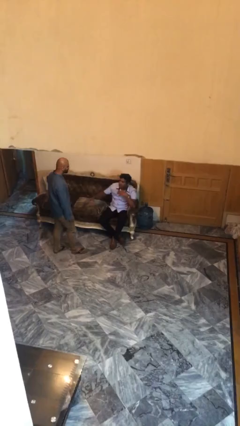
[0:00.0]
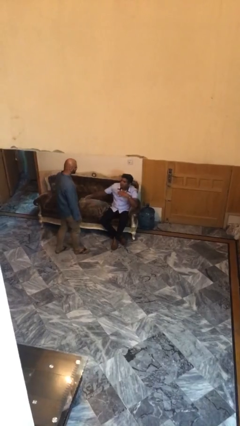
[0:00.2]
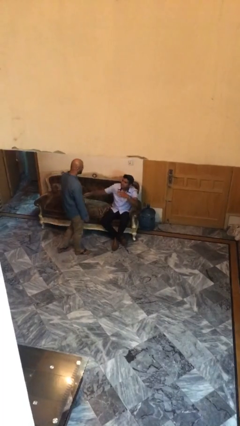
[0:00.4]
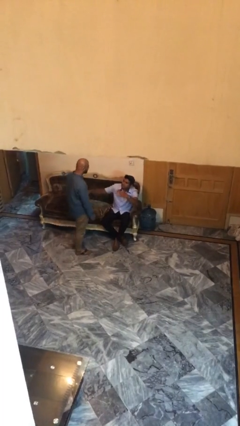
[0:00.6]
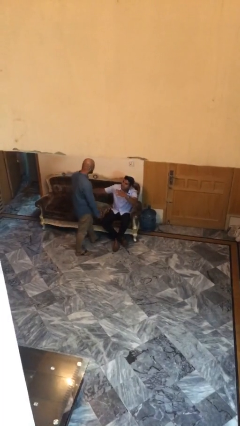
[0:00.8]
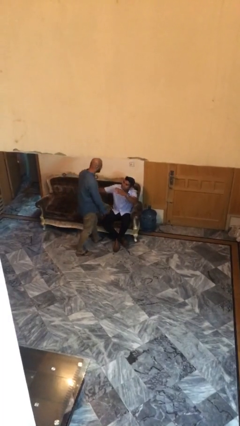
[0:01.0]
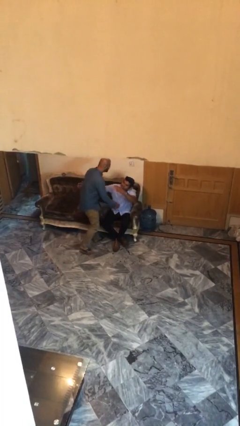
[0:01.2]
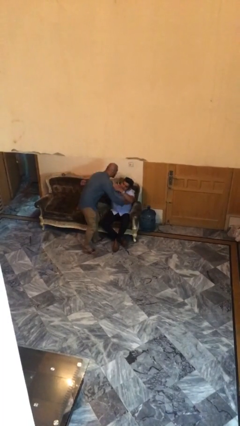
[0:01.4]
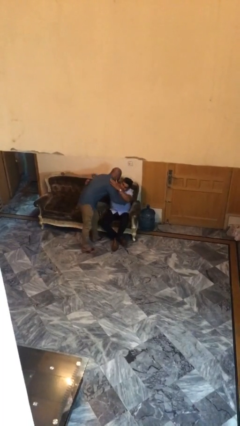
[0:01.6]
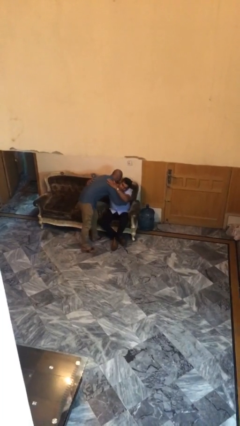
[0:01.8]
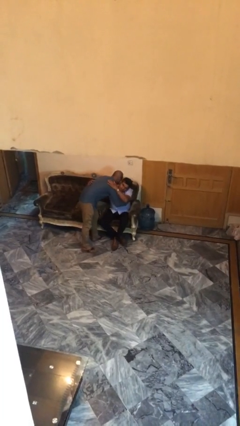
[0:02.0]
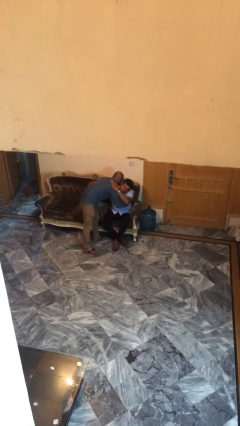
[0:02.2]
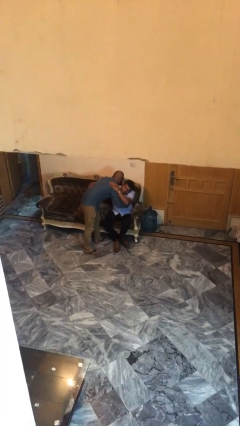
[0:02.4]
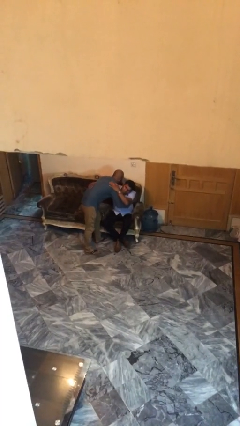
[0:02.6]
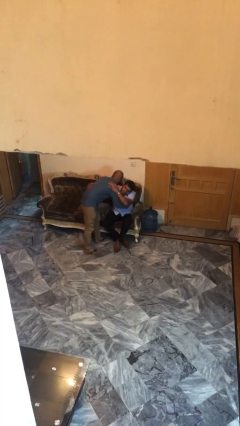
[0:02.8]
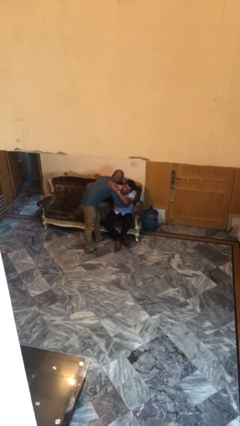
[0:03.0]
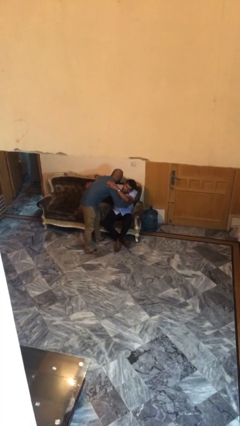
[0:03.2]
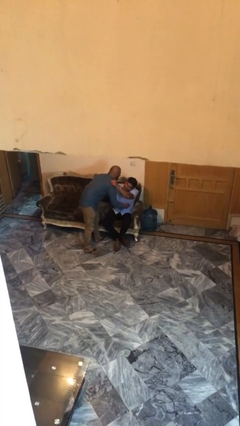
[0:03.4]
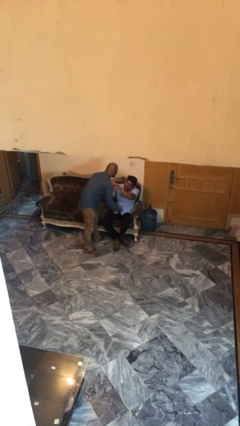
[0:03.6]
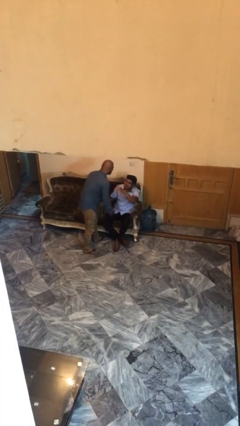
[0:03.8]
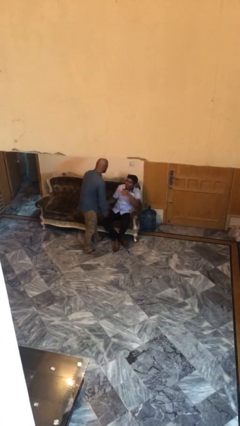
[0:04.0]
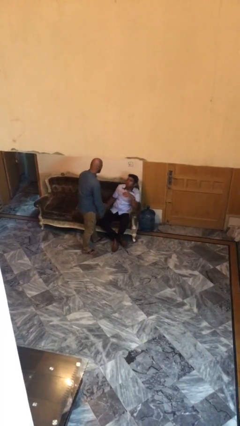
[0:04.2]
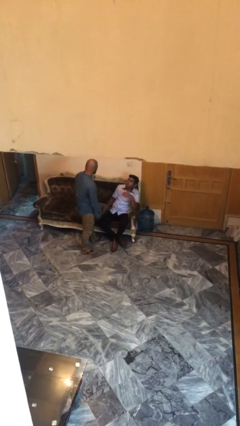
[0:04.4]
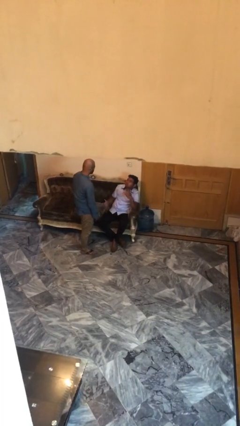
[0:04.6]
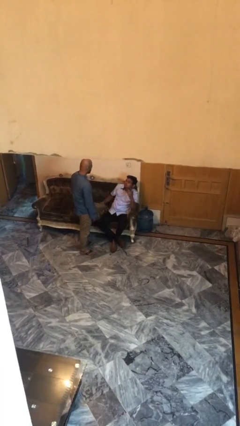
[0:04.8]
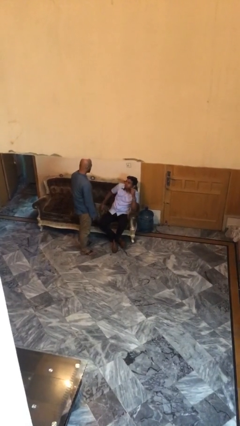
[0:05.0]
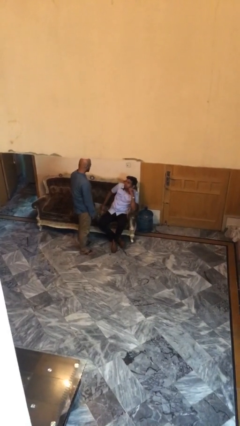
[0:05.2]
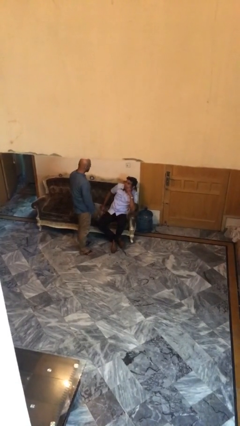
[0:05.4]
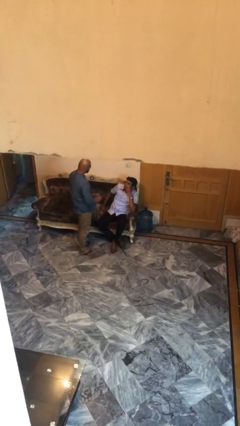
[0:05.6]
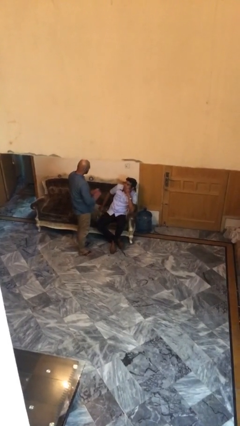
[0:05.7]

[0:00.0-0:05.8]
person embraces person

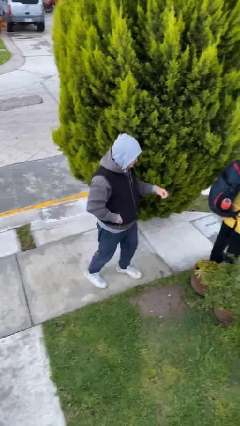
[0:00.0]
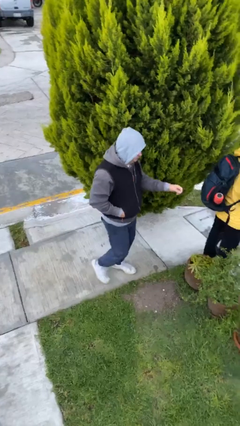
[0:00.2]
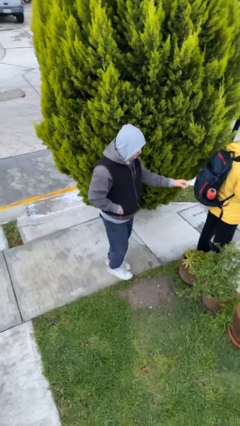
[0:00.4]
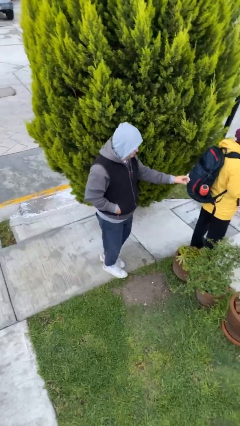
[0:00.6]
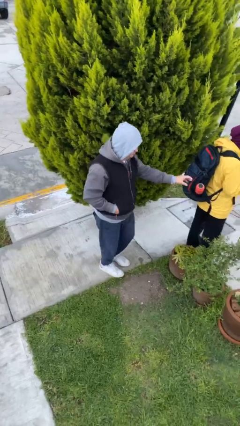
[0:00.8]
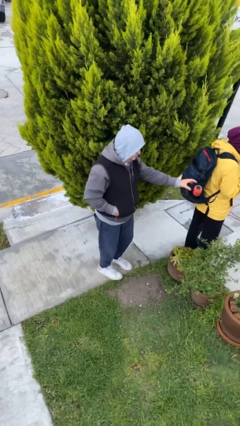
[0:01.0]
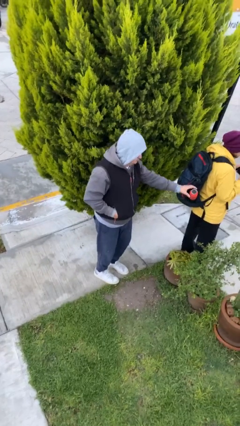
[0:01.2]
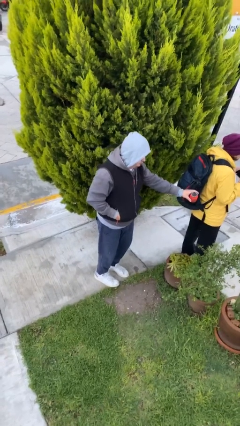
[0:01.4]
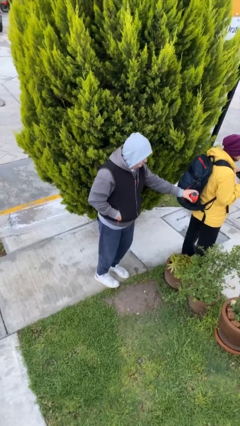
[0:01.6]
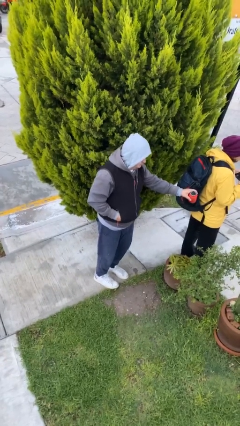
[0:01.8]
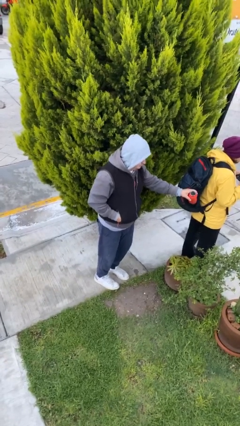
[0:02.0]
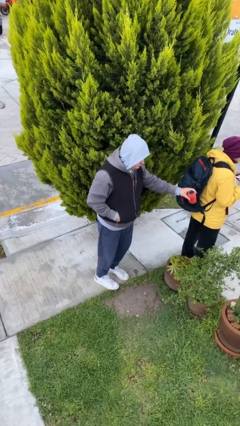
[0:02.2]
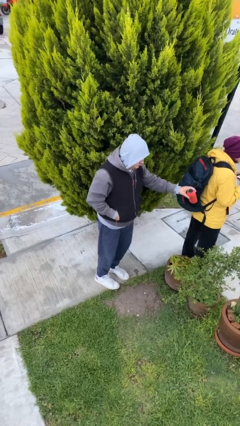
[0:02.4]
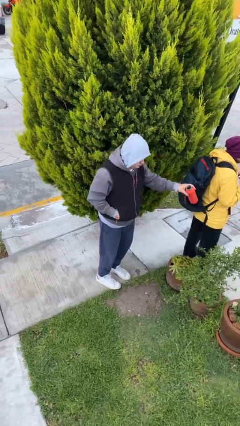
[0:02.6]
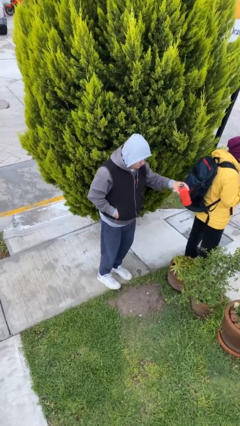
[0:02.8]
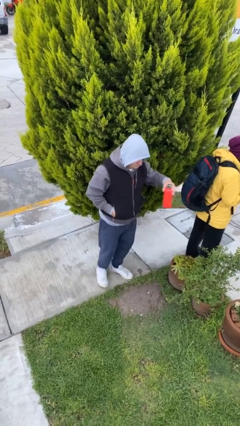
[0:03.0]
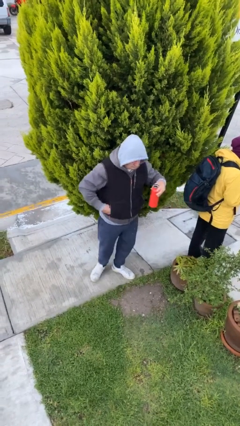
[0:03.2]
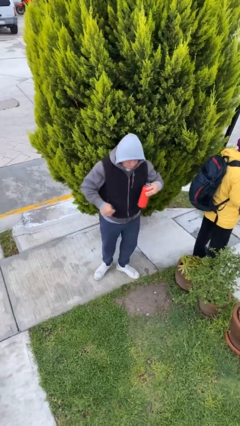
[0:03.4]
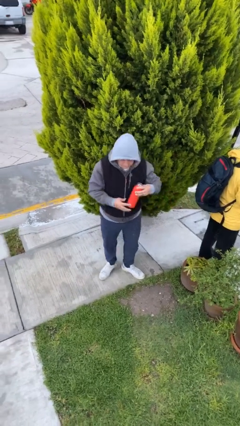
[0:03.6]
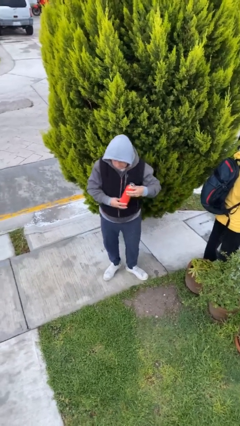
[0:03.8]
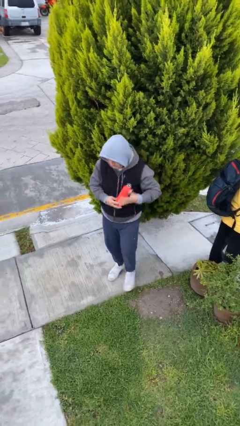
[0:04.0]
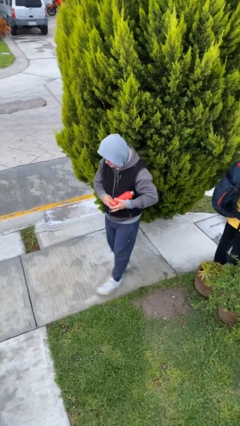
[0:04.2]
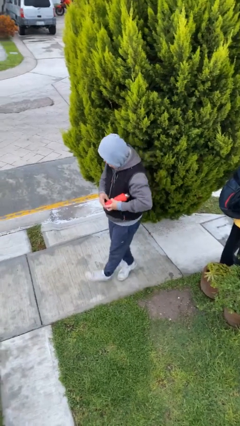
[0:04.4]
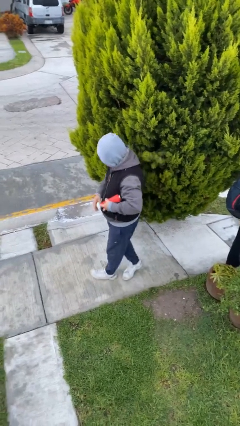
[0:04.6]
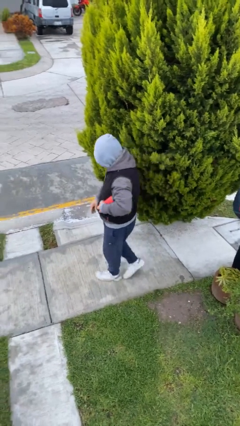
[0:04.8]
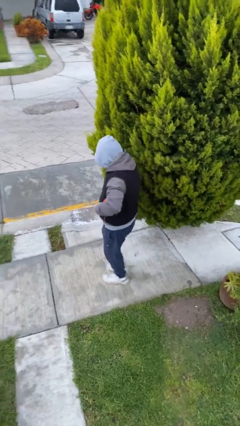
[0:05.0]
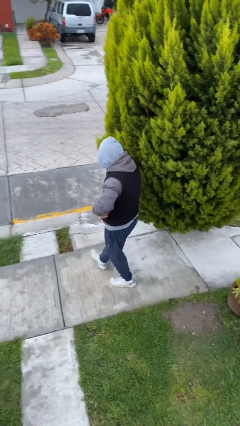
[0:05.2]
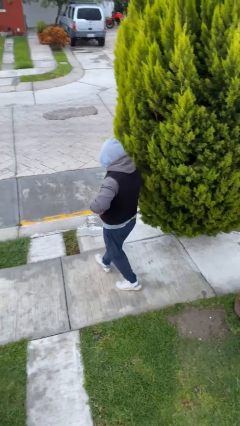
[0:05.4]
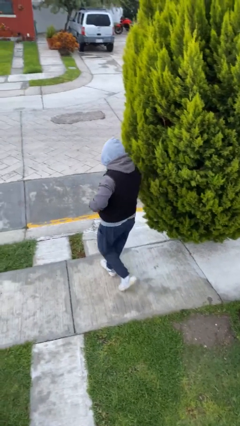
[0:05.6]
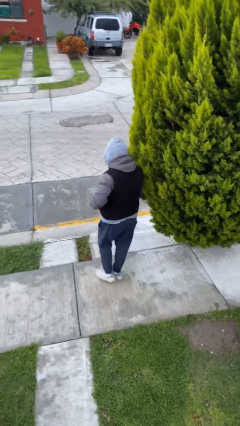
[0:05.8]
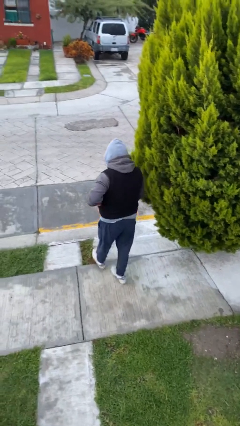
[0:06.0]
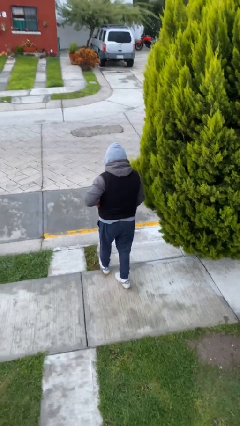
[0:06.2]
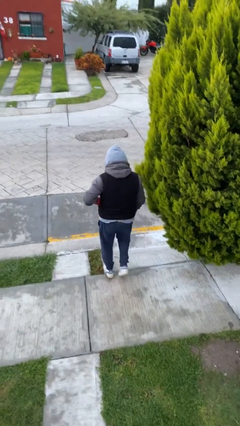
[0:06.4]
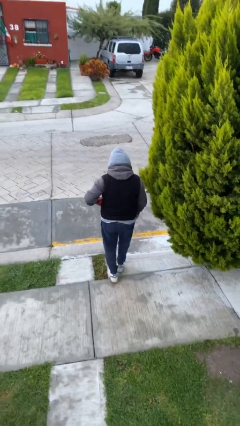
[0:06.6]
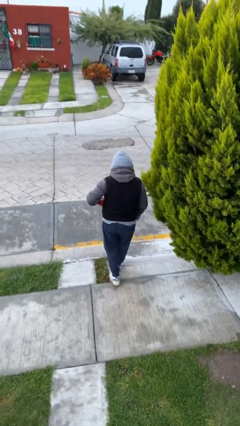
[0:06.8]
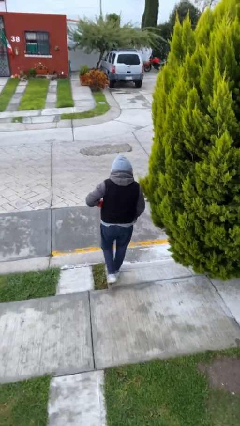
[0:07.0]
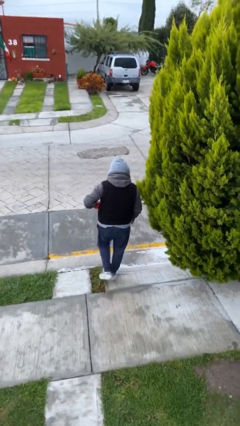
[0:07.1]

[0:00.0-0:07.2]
person steals object from person

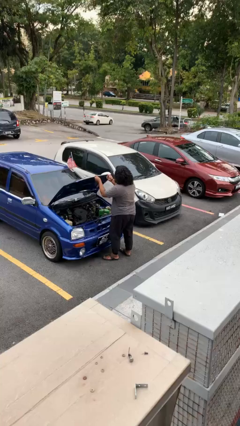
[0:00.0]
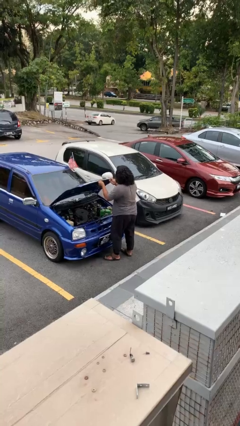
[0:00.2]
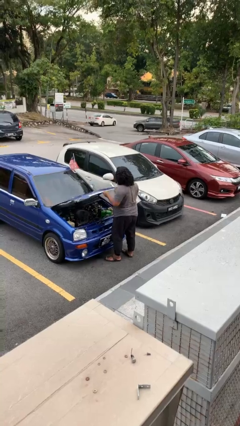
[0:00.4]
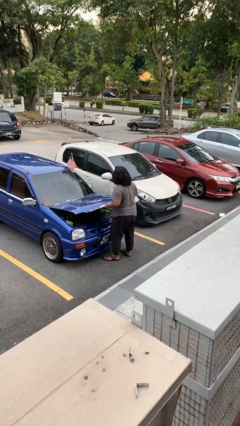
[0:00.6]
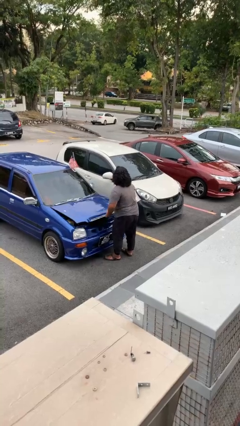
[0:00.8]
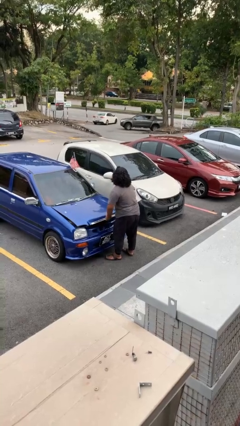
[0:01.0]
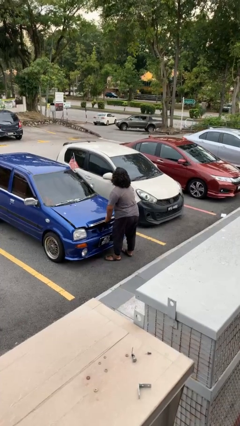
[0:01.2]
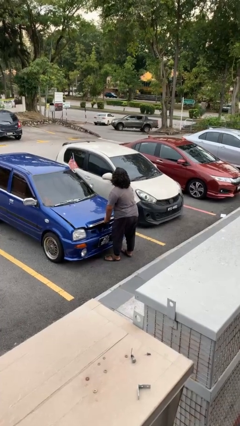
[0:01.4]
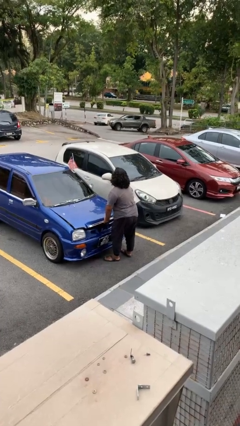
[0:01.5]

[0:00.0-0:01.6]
person closes car hood

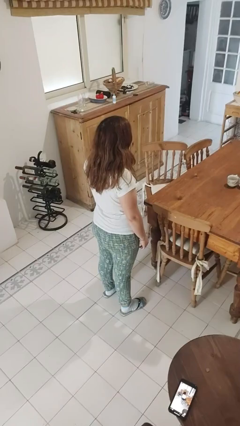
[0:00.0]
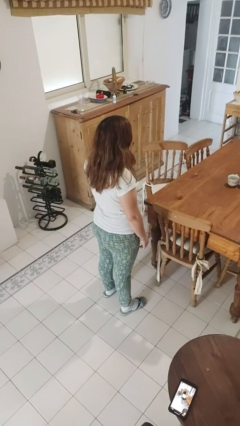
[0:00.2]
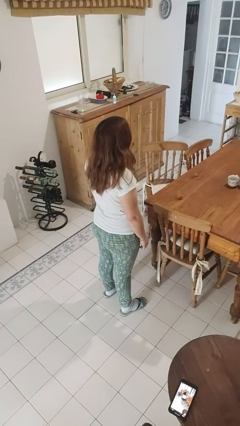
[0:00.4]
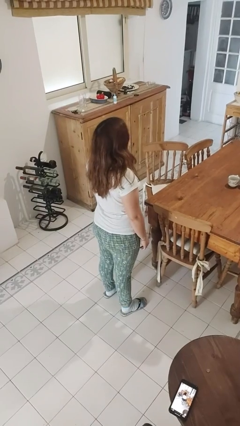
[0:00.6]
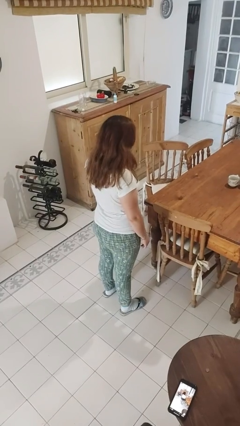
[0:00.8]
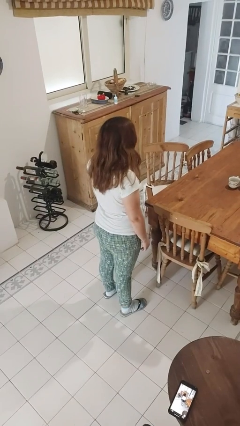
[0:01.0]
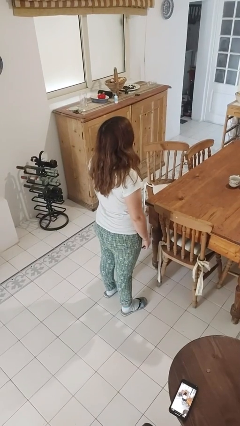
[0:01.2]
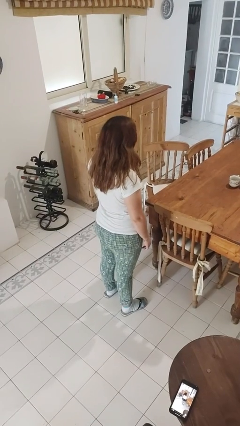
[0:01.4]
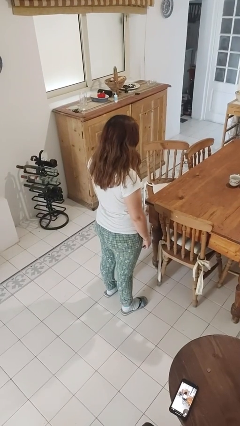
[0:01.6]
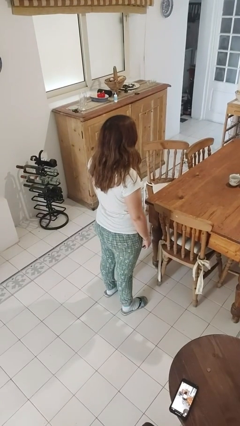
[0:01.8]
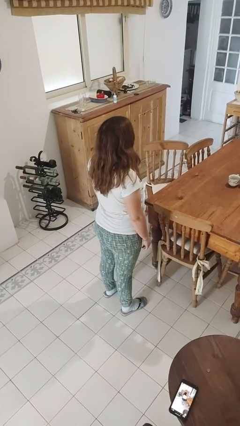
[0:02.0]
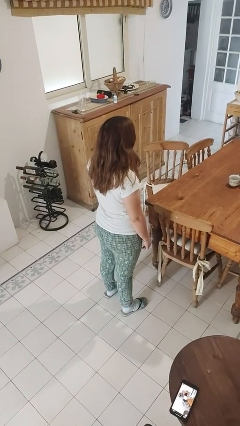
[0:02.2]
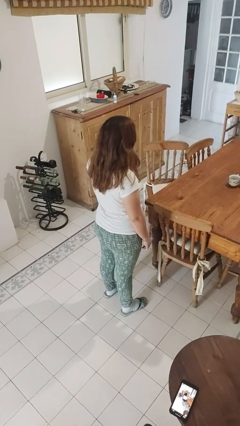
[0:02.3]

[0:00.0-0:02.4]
person nods head

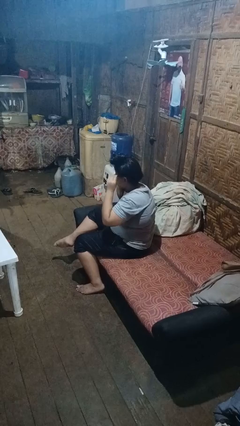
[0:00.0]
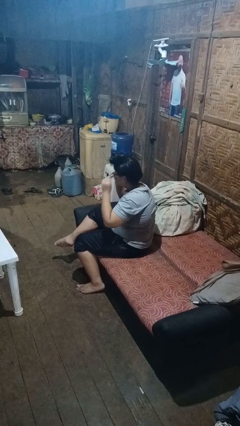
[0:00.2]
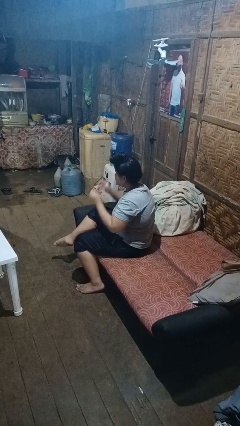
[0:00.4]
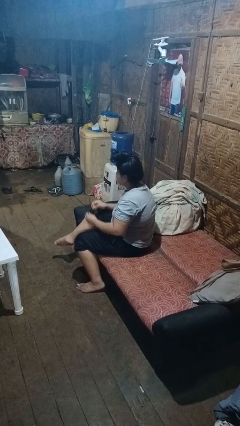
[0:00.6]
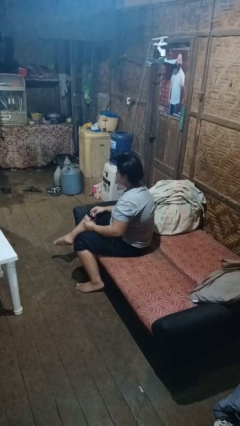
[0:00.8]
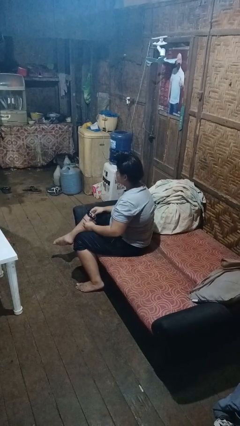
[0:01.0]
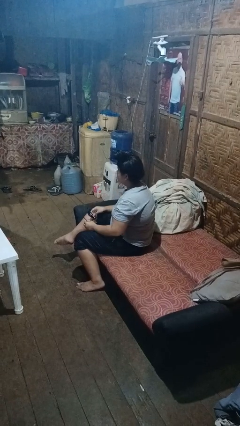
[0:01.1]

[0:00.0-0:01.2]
person takes off glasses
